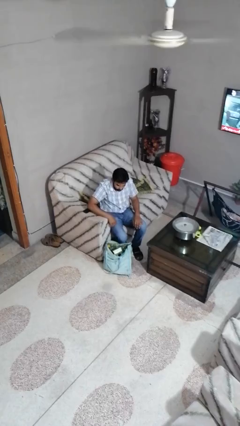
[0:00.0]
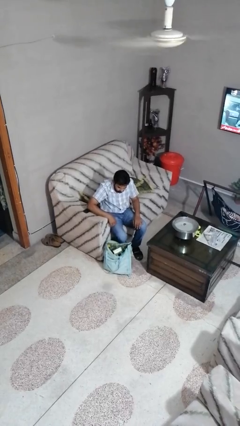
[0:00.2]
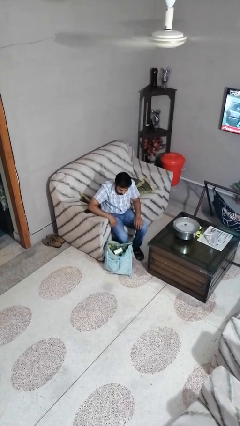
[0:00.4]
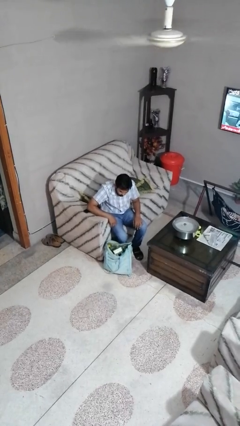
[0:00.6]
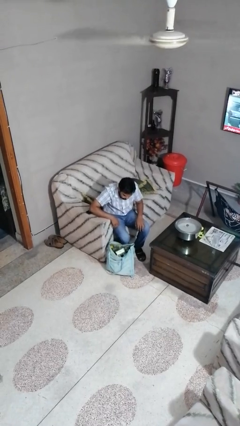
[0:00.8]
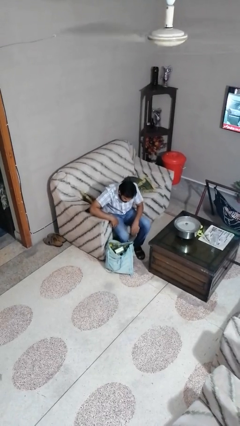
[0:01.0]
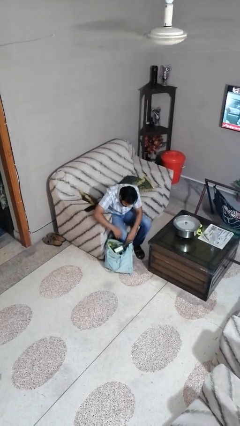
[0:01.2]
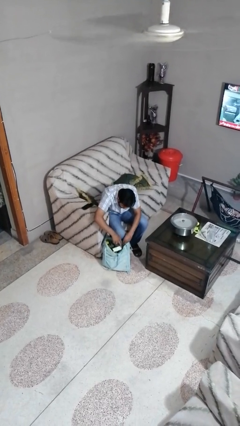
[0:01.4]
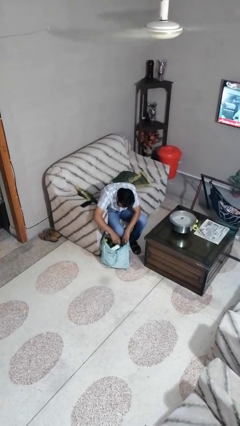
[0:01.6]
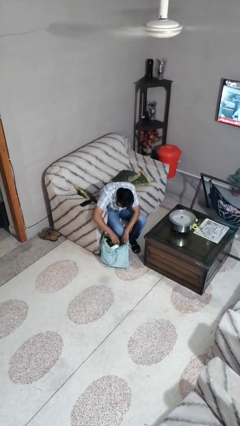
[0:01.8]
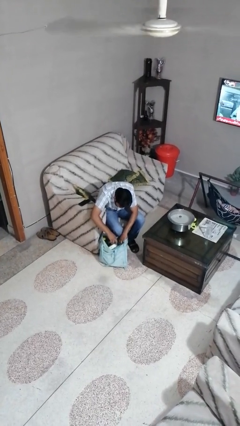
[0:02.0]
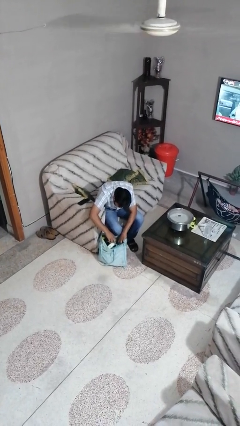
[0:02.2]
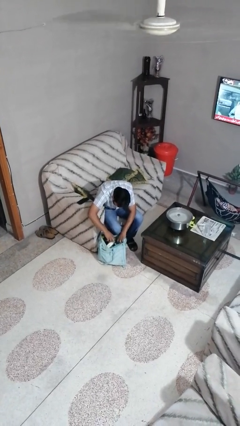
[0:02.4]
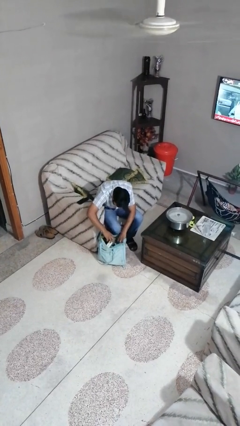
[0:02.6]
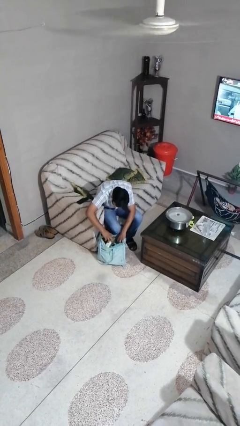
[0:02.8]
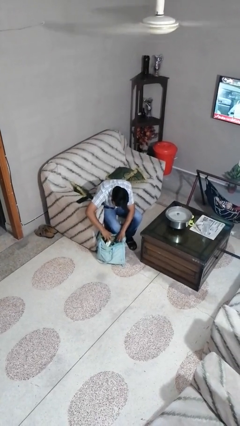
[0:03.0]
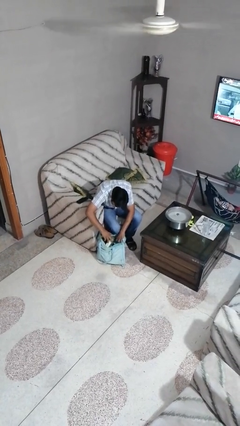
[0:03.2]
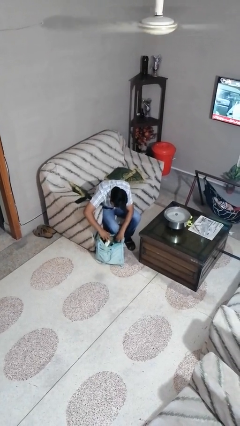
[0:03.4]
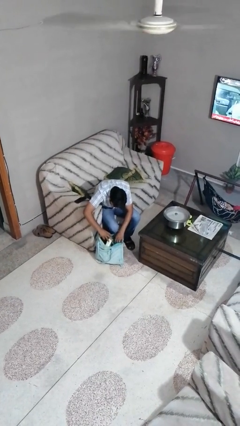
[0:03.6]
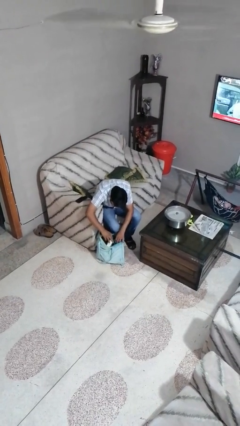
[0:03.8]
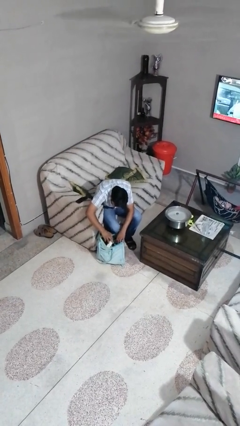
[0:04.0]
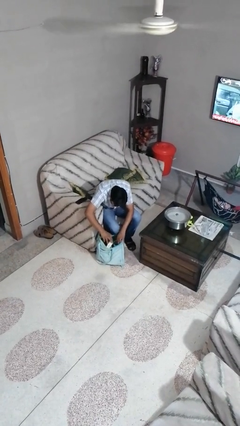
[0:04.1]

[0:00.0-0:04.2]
person searches in bag

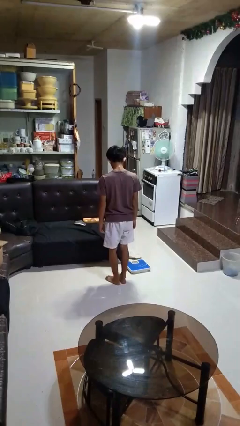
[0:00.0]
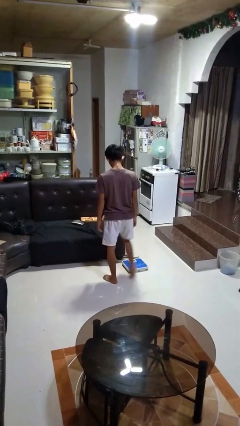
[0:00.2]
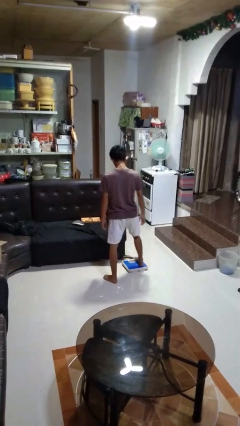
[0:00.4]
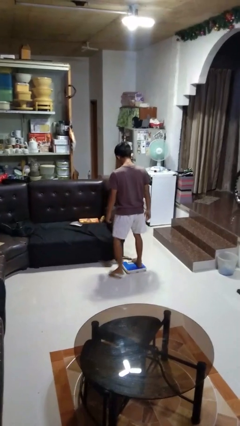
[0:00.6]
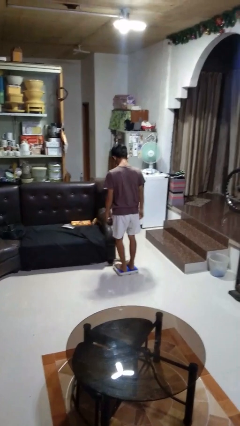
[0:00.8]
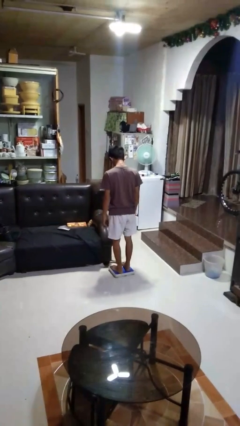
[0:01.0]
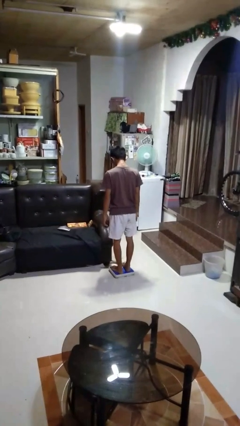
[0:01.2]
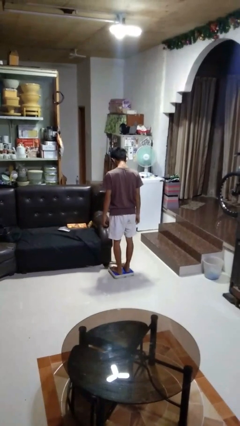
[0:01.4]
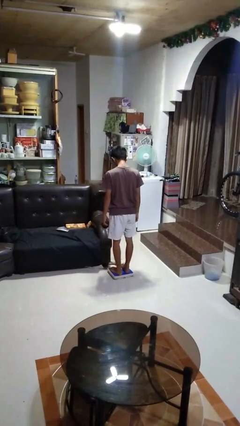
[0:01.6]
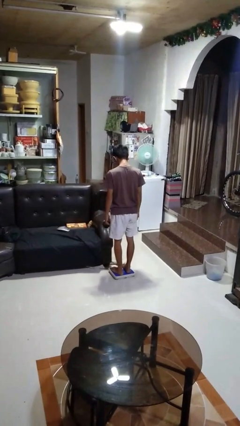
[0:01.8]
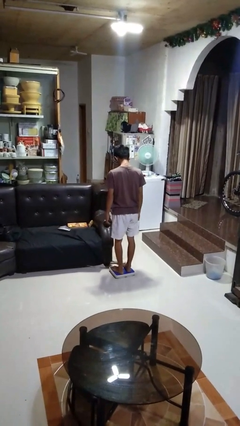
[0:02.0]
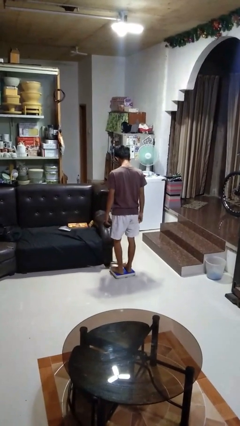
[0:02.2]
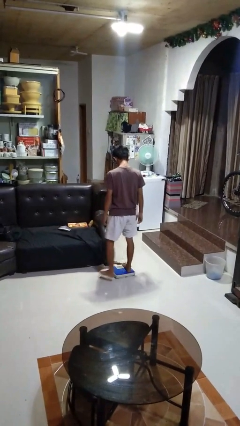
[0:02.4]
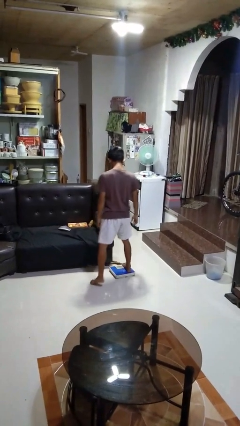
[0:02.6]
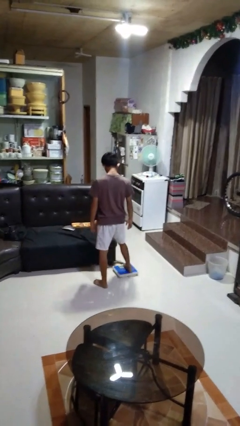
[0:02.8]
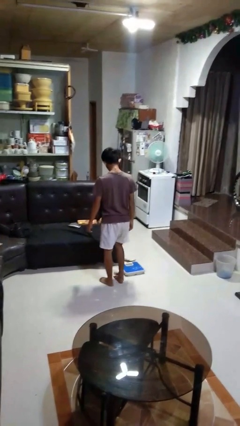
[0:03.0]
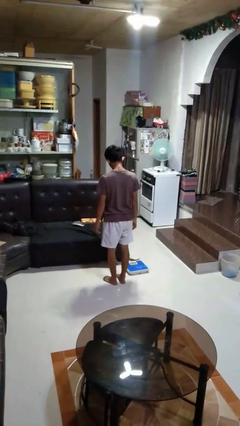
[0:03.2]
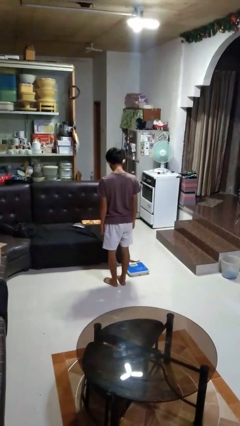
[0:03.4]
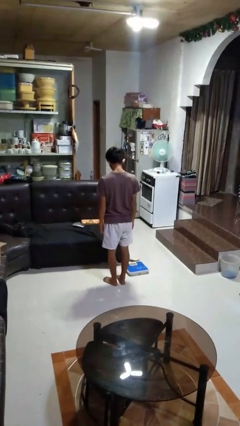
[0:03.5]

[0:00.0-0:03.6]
person uses bodyweight scale

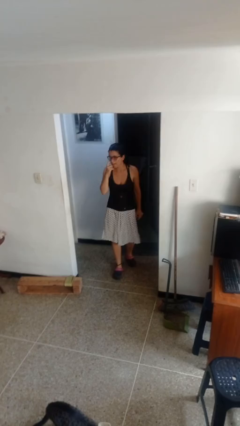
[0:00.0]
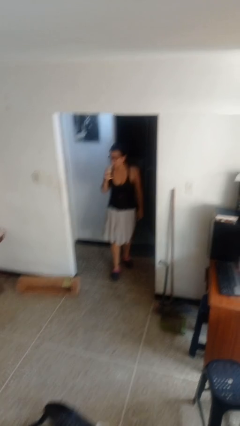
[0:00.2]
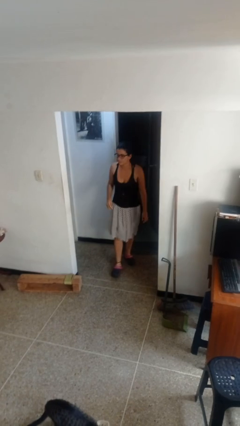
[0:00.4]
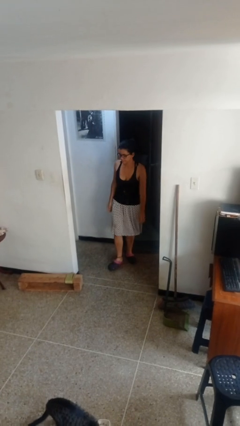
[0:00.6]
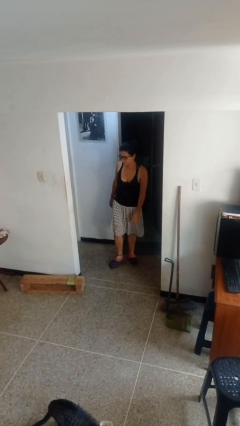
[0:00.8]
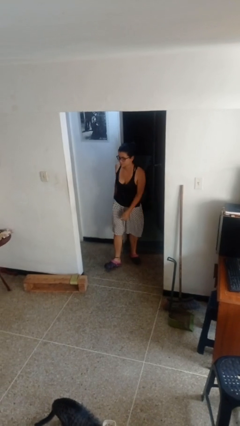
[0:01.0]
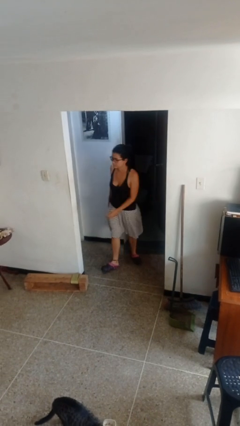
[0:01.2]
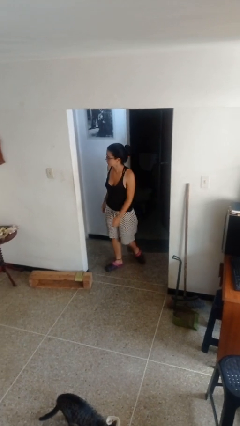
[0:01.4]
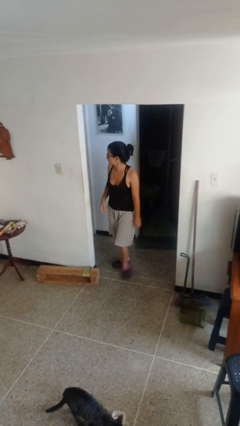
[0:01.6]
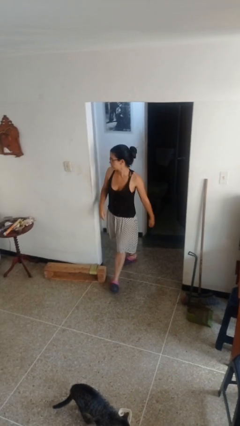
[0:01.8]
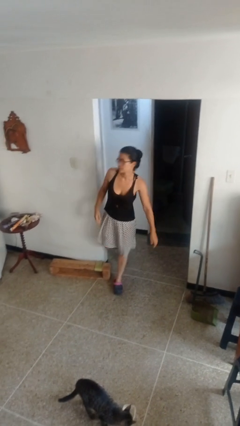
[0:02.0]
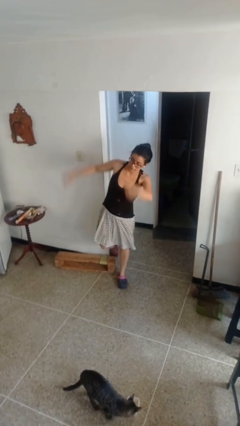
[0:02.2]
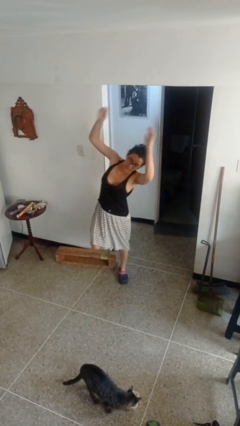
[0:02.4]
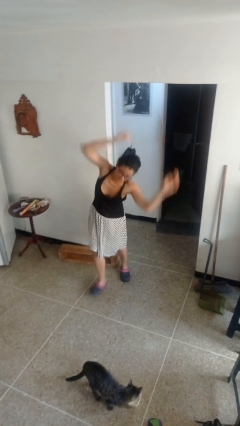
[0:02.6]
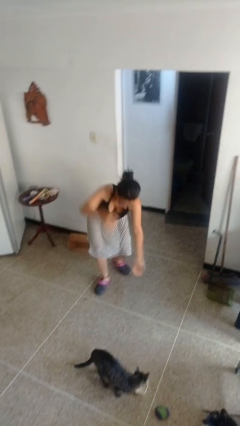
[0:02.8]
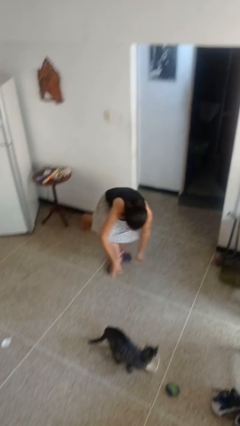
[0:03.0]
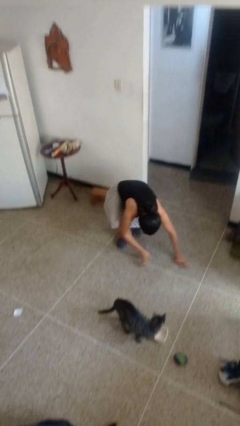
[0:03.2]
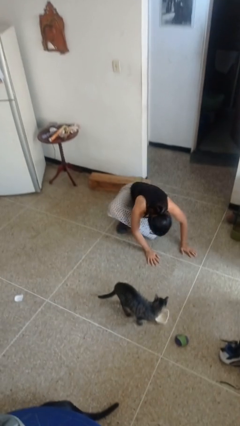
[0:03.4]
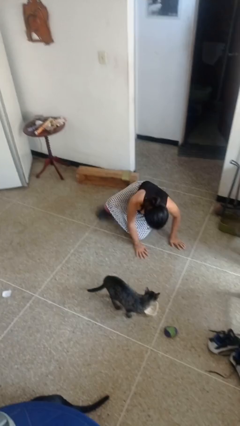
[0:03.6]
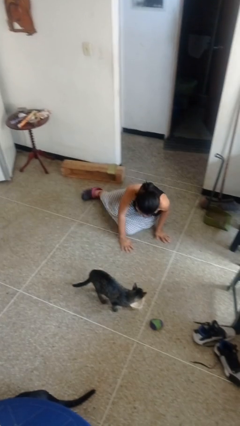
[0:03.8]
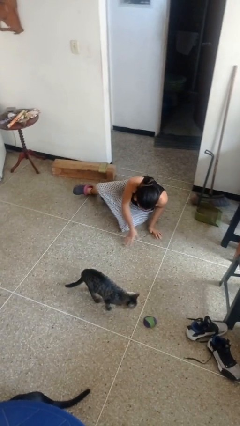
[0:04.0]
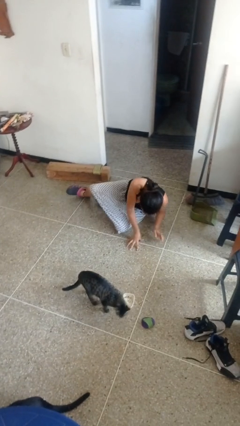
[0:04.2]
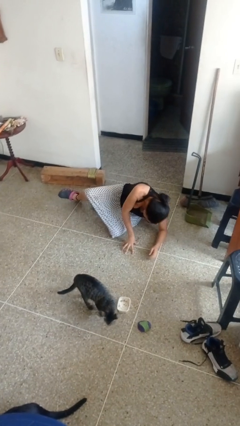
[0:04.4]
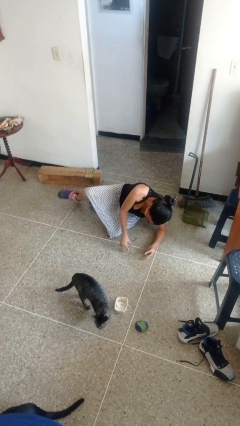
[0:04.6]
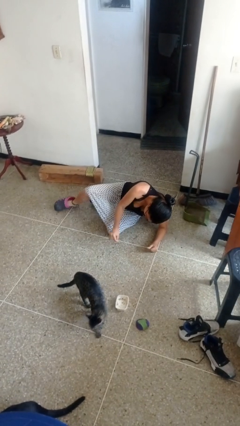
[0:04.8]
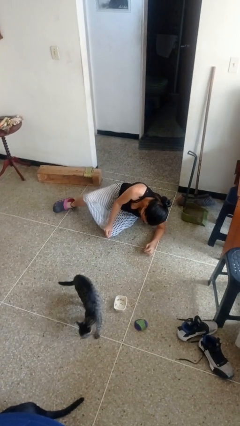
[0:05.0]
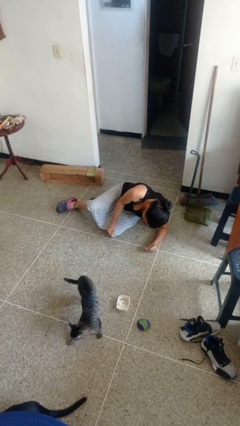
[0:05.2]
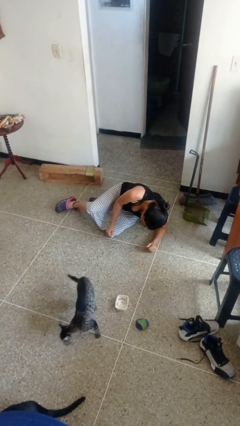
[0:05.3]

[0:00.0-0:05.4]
person trips on object on floor

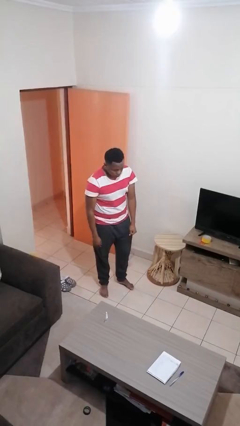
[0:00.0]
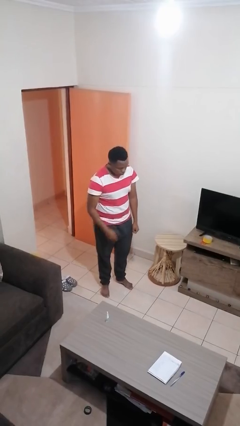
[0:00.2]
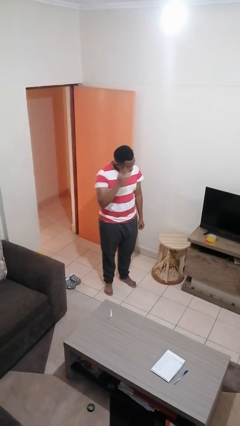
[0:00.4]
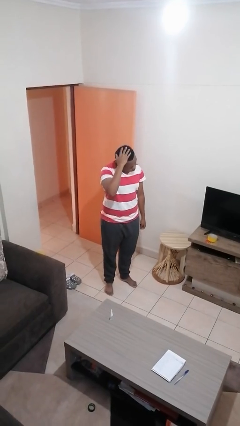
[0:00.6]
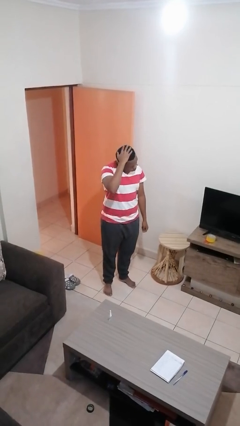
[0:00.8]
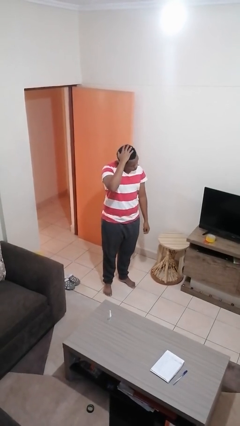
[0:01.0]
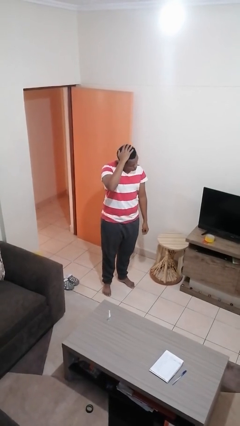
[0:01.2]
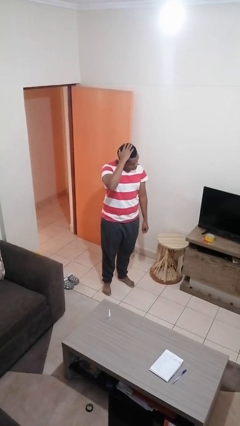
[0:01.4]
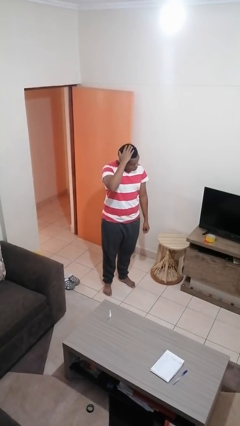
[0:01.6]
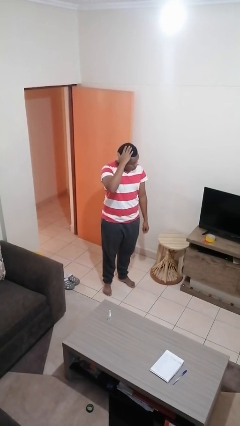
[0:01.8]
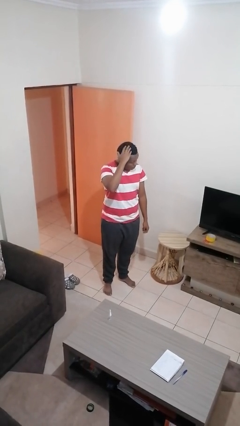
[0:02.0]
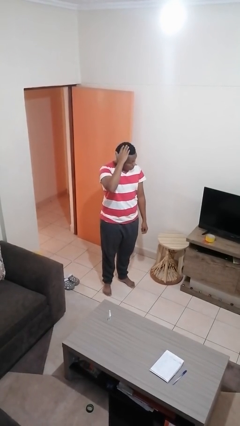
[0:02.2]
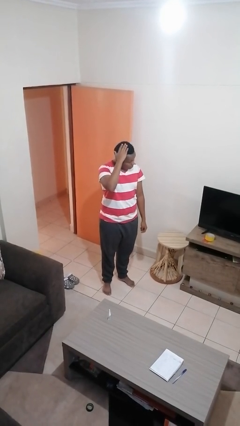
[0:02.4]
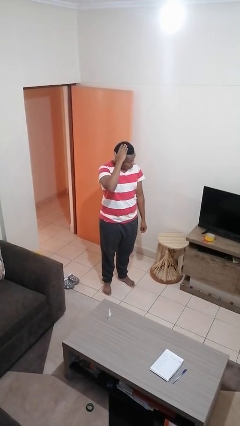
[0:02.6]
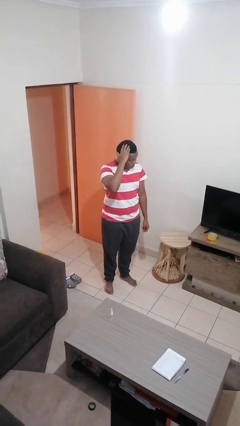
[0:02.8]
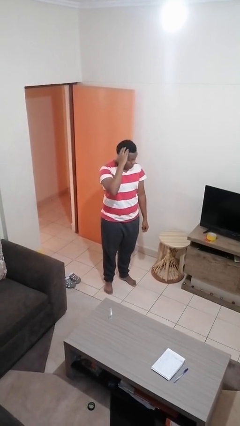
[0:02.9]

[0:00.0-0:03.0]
person pats head

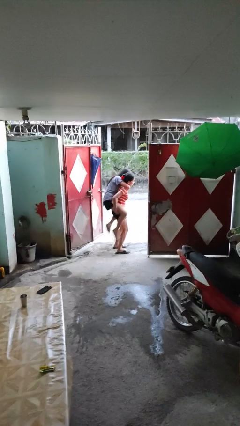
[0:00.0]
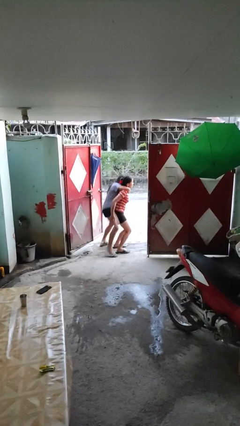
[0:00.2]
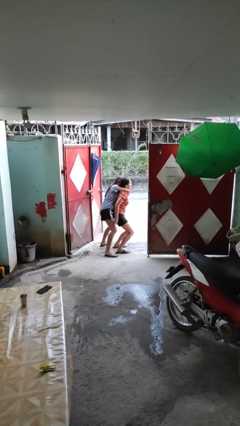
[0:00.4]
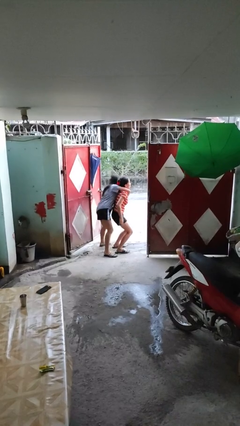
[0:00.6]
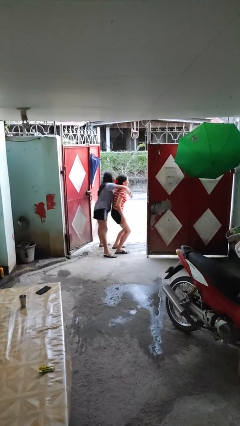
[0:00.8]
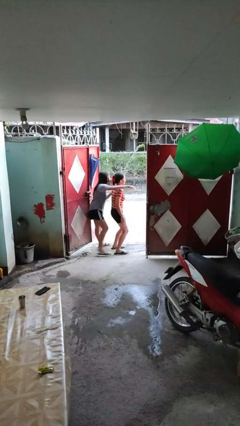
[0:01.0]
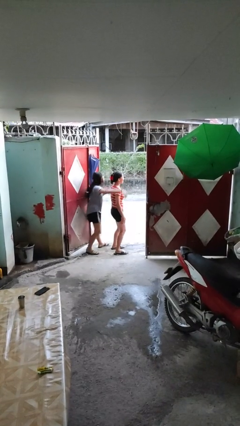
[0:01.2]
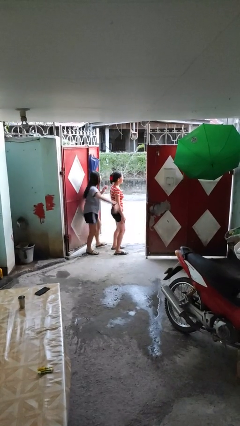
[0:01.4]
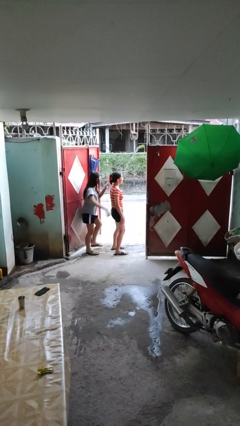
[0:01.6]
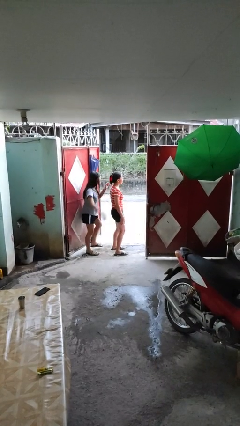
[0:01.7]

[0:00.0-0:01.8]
person puts down person
